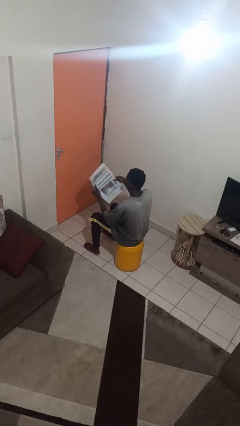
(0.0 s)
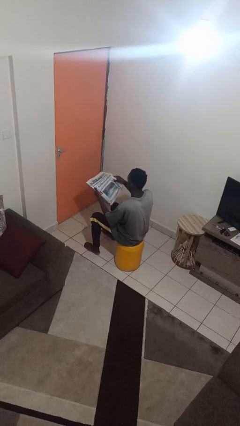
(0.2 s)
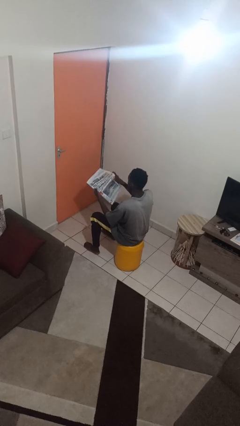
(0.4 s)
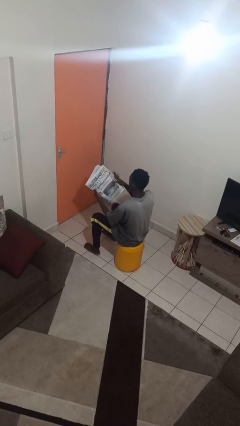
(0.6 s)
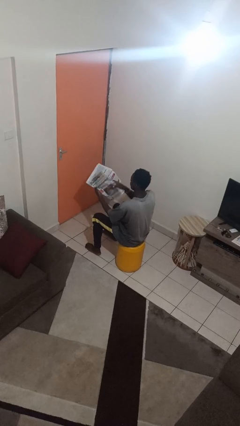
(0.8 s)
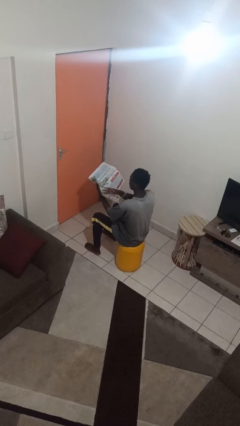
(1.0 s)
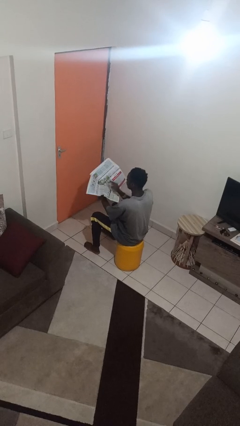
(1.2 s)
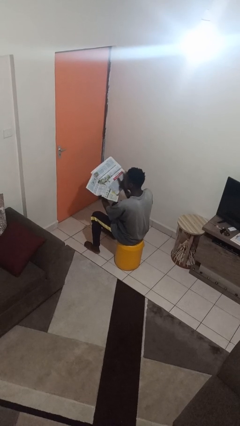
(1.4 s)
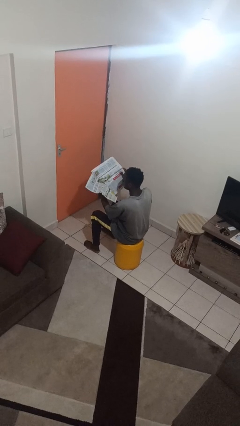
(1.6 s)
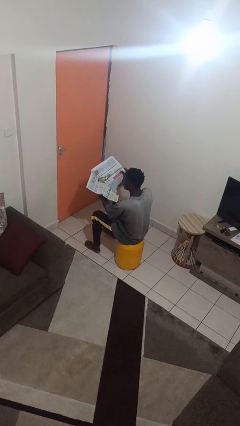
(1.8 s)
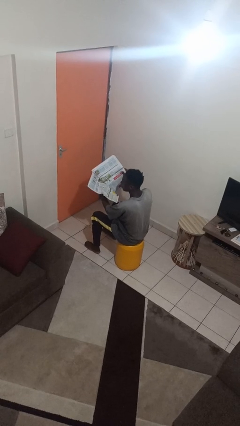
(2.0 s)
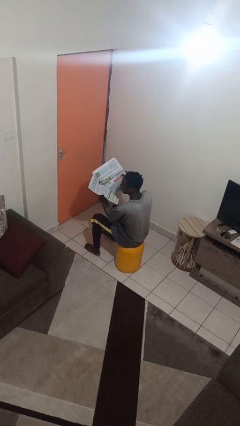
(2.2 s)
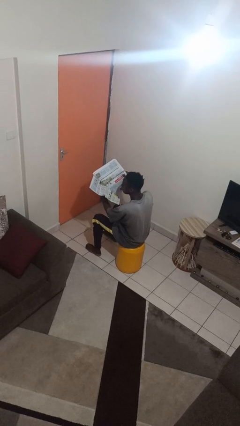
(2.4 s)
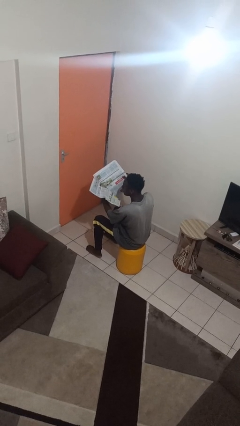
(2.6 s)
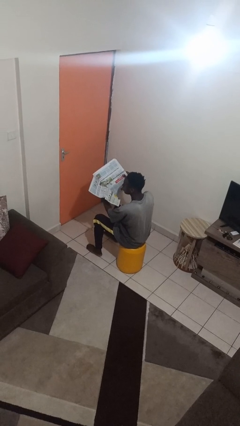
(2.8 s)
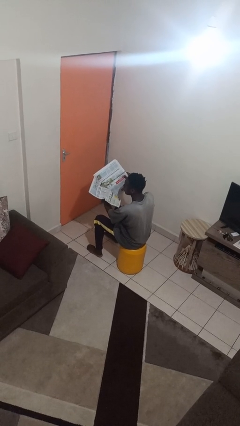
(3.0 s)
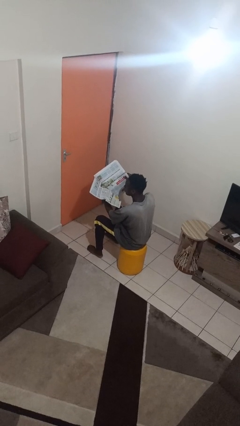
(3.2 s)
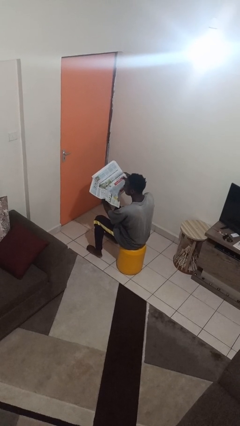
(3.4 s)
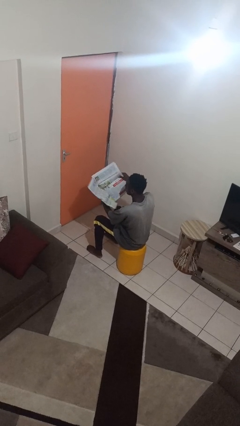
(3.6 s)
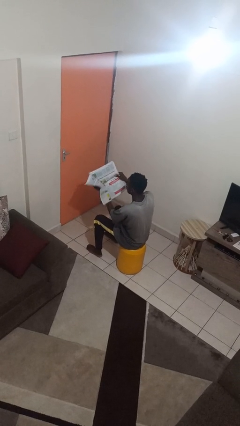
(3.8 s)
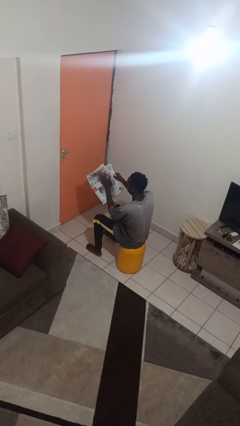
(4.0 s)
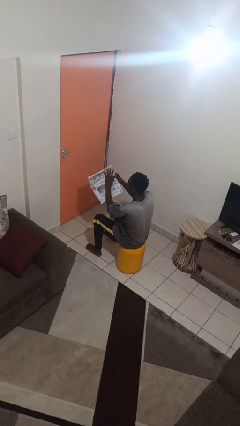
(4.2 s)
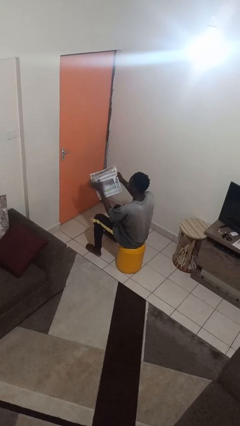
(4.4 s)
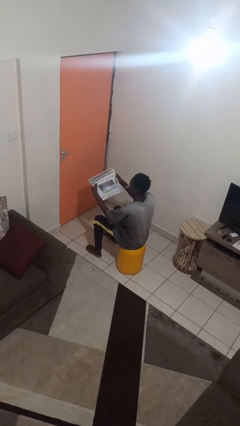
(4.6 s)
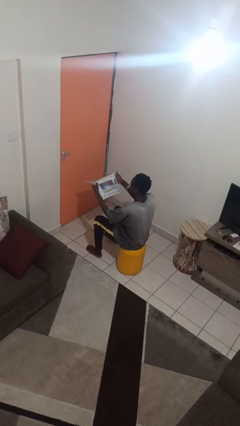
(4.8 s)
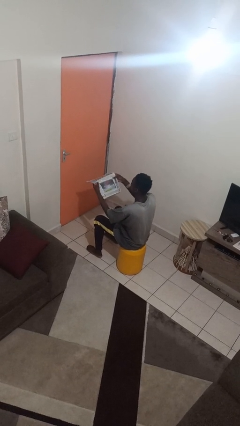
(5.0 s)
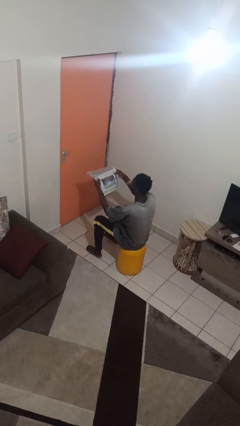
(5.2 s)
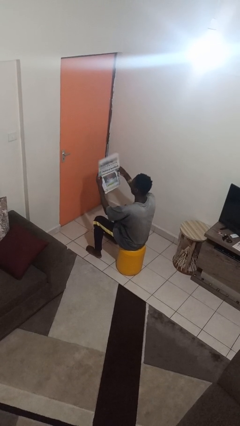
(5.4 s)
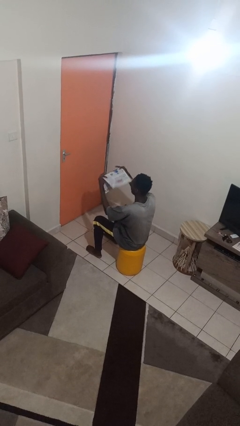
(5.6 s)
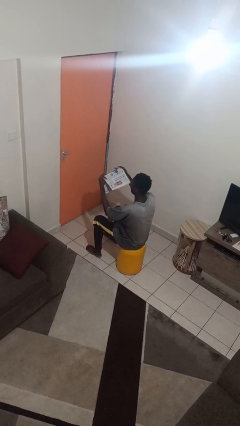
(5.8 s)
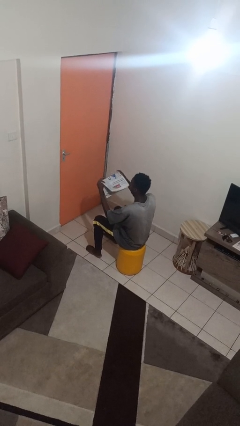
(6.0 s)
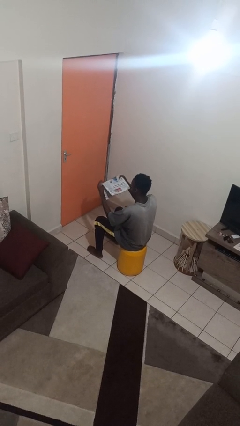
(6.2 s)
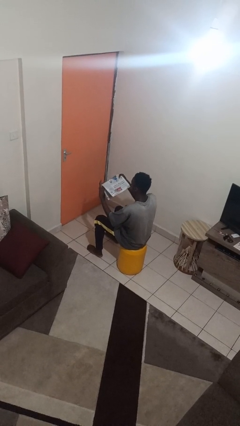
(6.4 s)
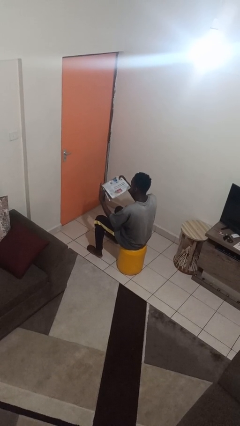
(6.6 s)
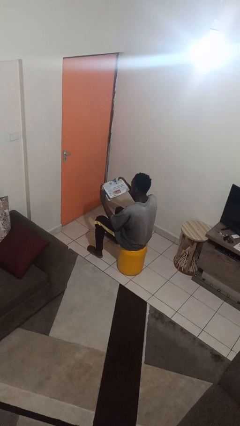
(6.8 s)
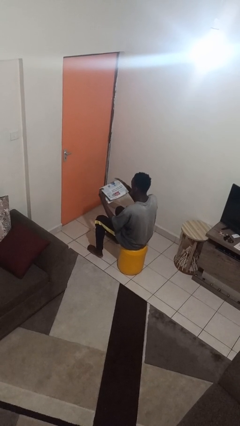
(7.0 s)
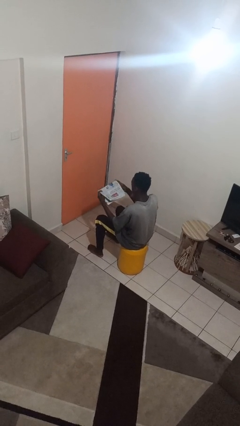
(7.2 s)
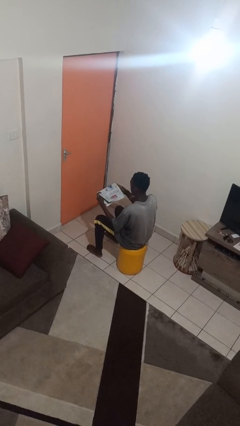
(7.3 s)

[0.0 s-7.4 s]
person reads newspaper

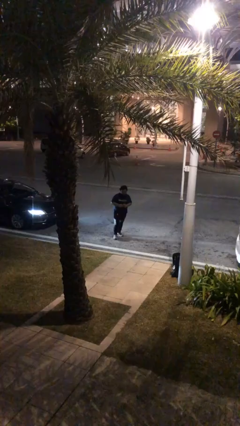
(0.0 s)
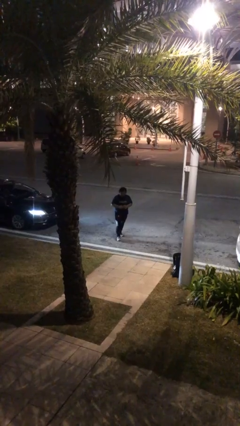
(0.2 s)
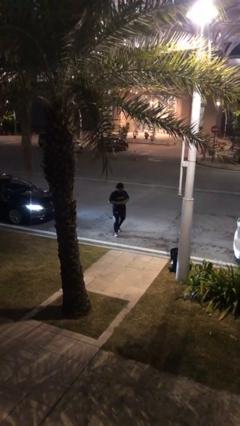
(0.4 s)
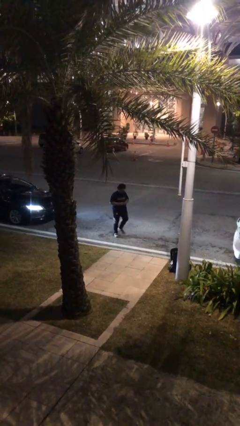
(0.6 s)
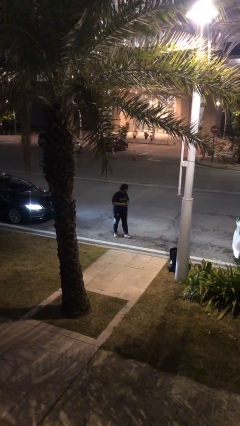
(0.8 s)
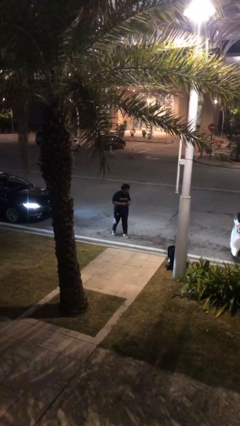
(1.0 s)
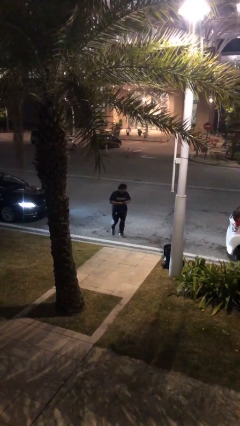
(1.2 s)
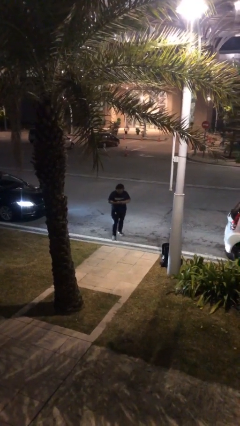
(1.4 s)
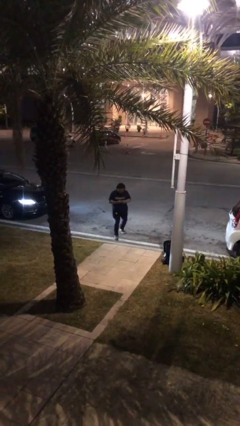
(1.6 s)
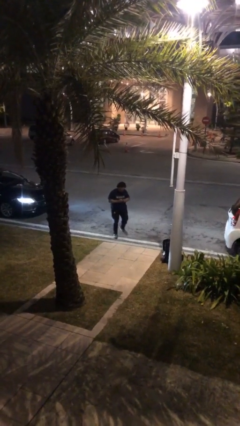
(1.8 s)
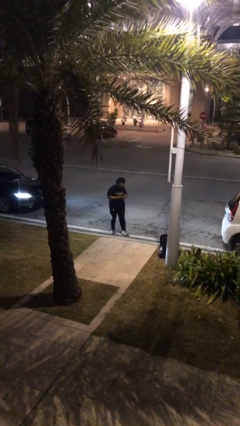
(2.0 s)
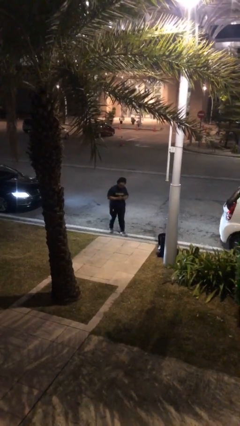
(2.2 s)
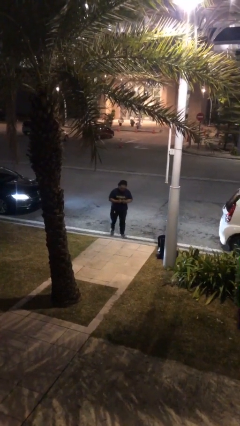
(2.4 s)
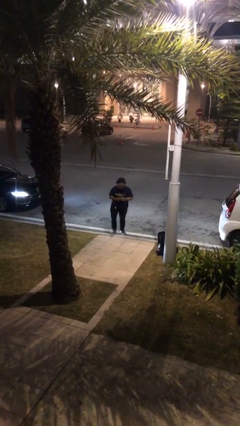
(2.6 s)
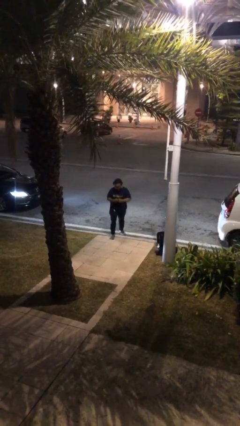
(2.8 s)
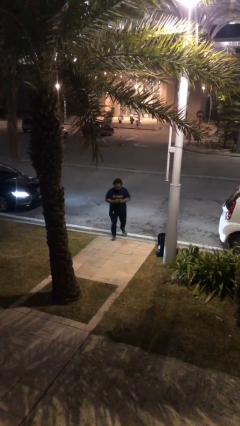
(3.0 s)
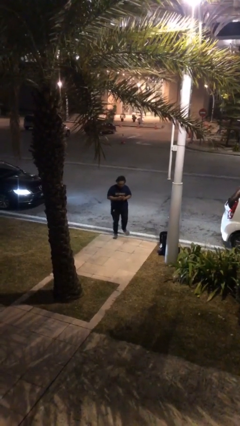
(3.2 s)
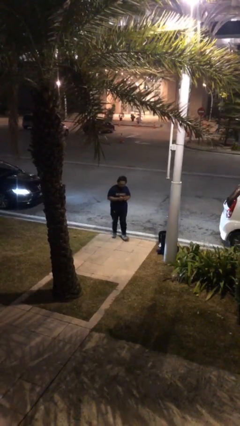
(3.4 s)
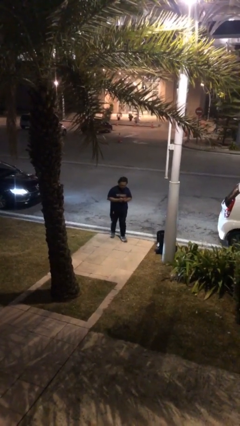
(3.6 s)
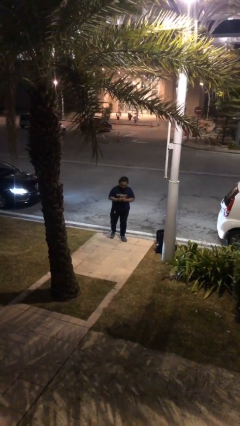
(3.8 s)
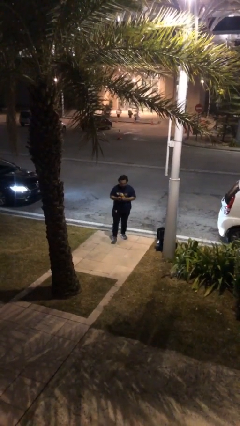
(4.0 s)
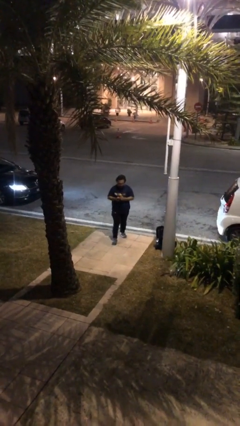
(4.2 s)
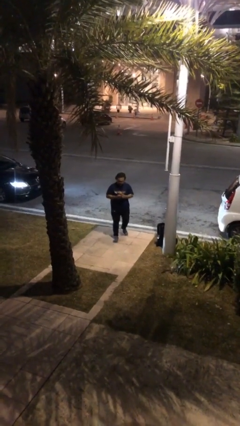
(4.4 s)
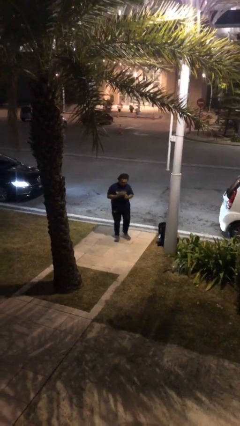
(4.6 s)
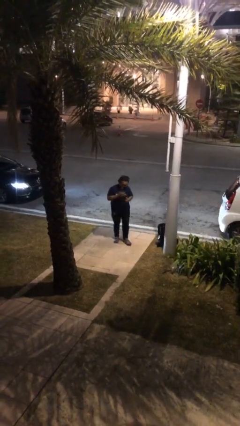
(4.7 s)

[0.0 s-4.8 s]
person texts on phone

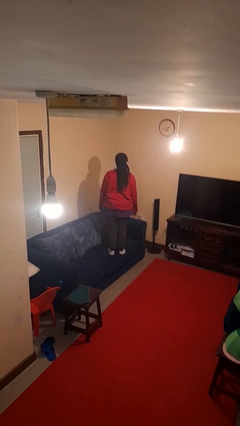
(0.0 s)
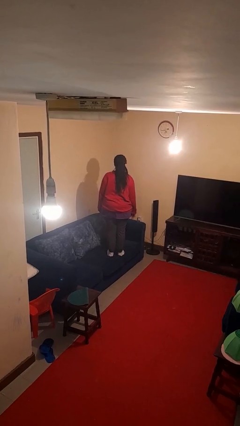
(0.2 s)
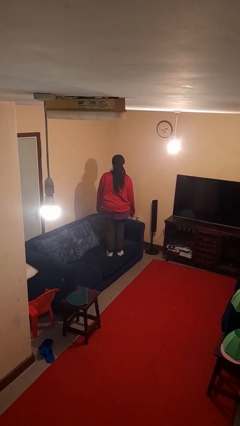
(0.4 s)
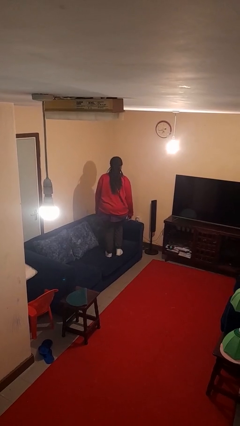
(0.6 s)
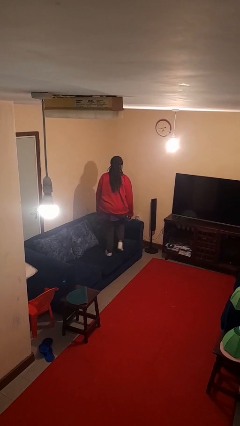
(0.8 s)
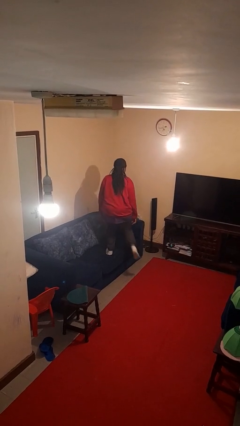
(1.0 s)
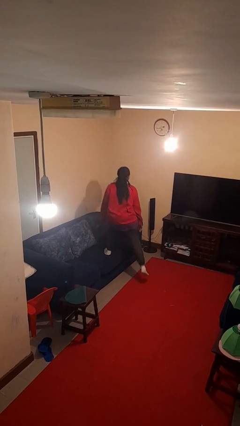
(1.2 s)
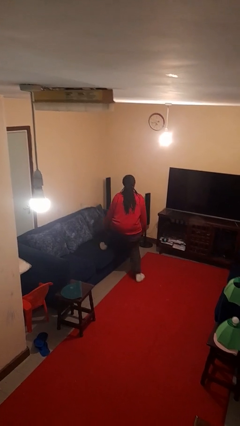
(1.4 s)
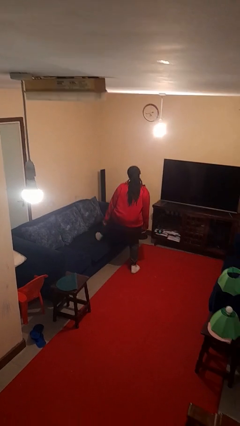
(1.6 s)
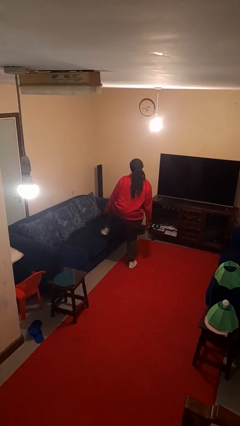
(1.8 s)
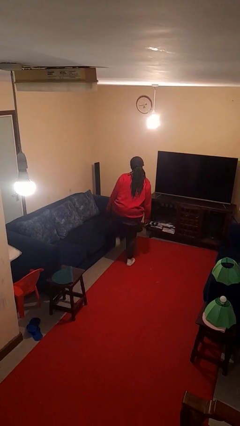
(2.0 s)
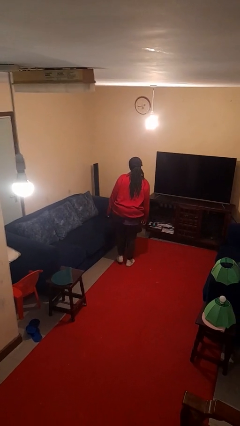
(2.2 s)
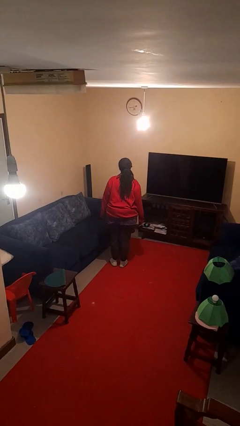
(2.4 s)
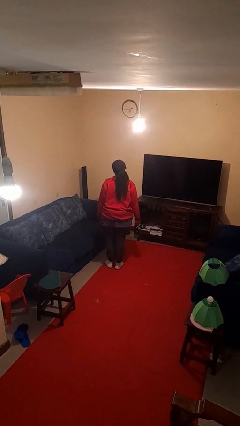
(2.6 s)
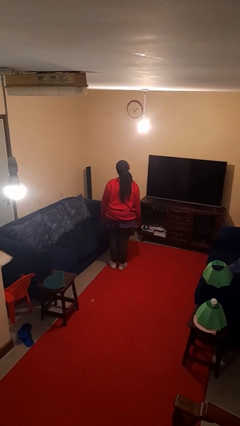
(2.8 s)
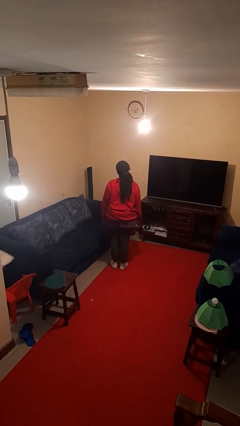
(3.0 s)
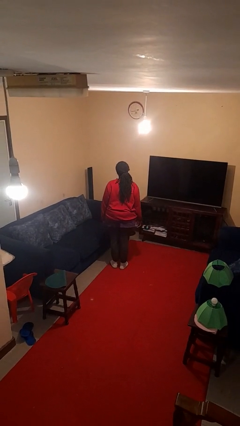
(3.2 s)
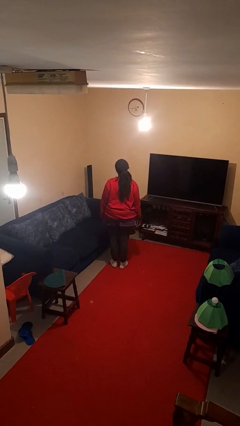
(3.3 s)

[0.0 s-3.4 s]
person climbs off couch

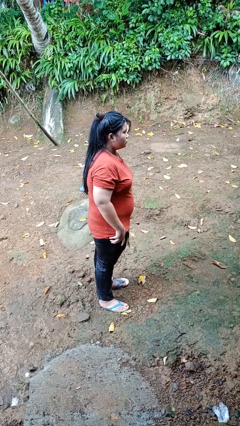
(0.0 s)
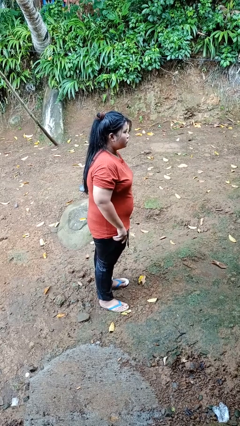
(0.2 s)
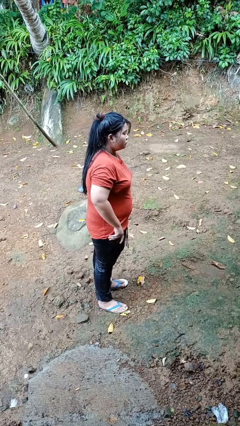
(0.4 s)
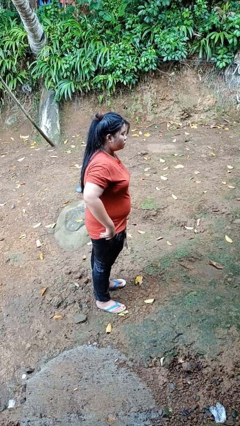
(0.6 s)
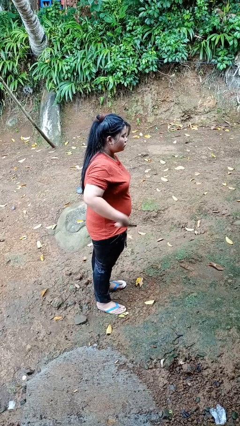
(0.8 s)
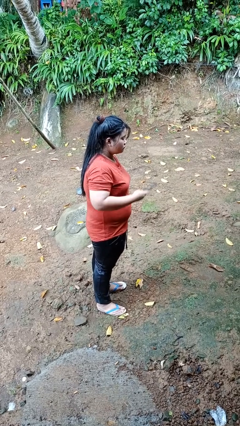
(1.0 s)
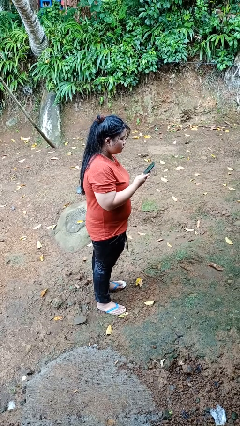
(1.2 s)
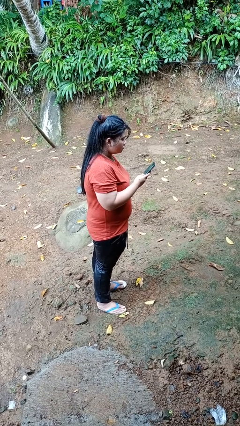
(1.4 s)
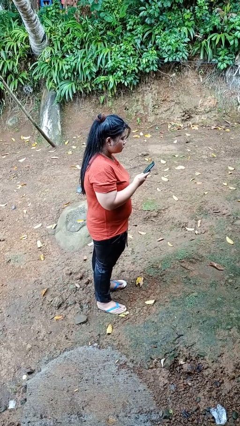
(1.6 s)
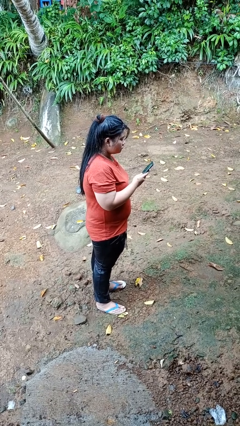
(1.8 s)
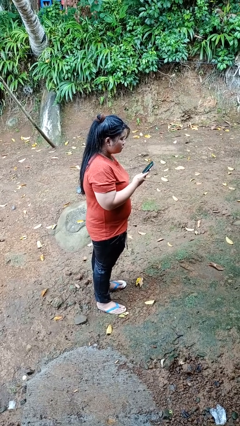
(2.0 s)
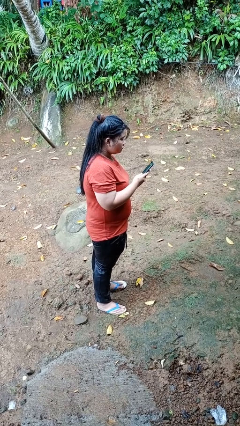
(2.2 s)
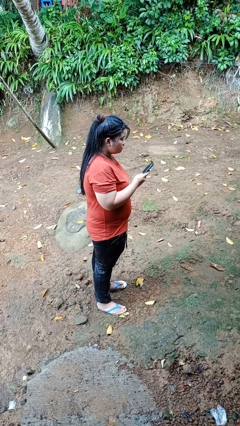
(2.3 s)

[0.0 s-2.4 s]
person takes phone from pocket
